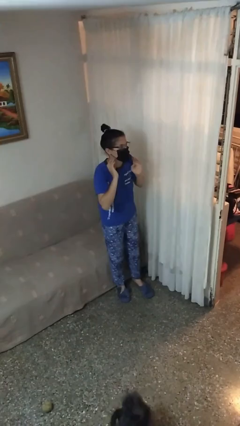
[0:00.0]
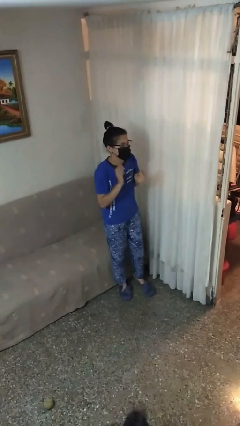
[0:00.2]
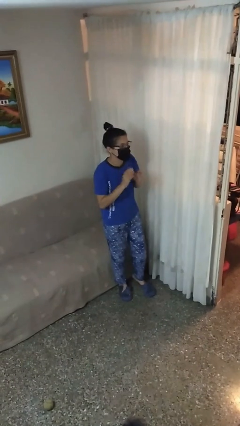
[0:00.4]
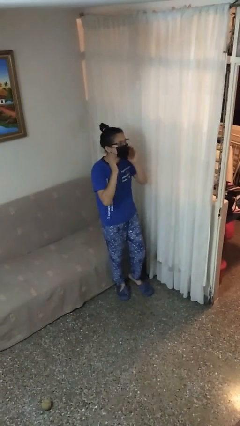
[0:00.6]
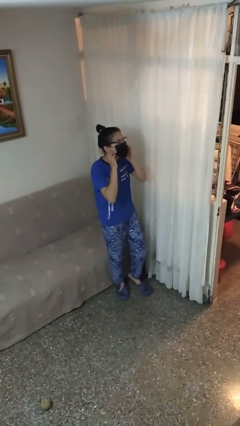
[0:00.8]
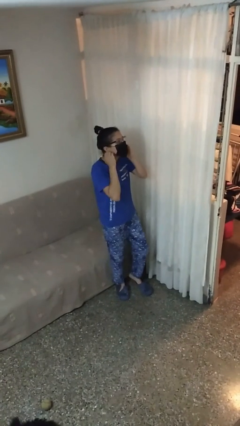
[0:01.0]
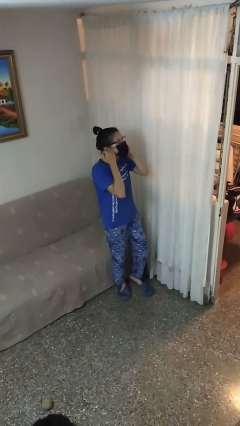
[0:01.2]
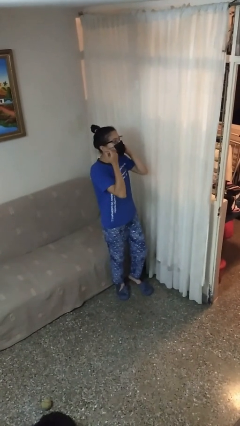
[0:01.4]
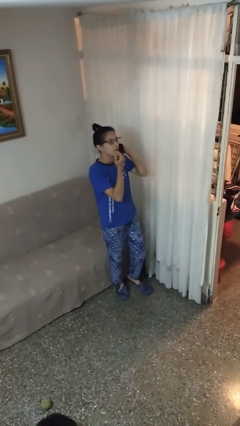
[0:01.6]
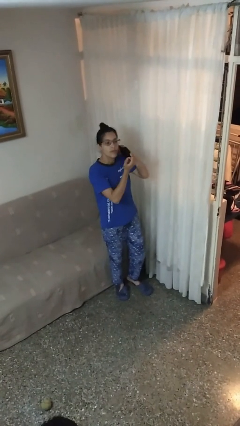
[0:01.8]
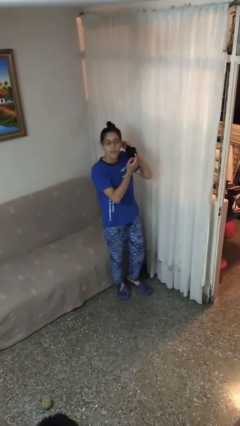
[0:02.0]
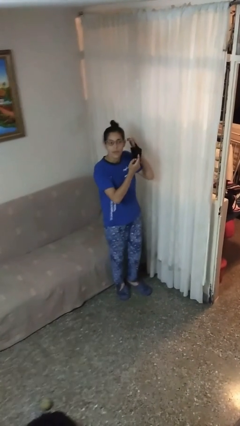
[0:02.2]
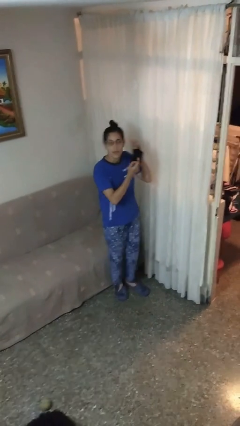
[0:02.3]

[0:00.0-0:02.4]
person takes off facemask

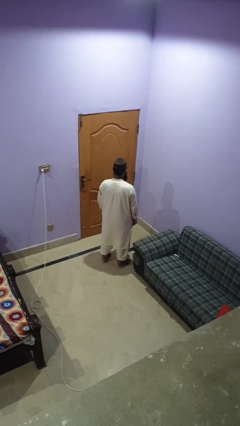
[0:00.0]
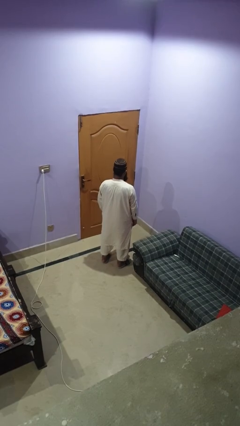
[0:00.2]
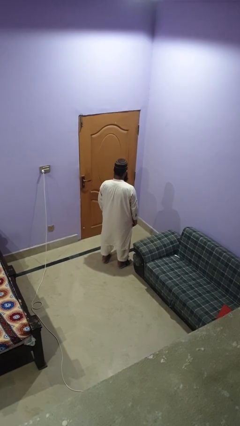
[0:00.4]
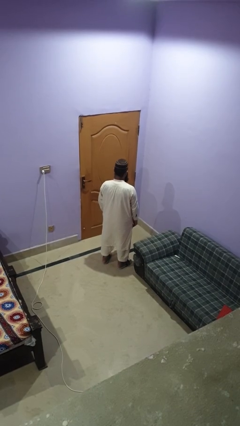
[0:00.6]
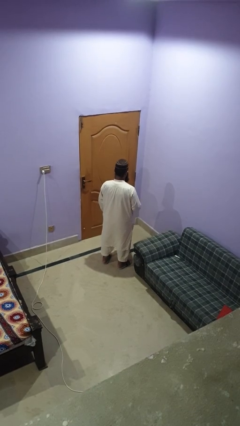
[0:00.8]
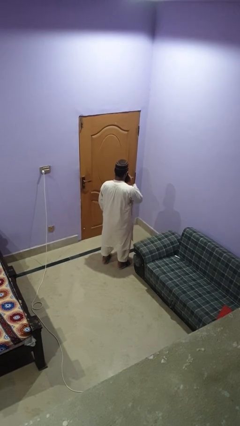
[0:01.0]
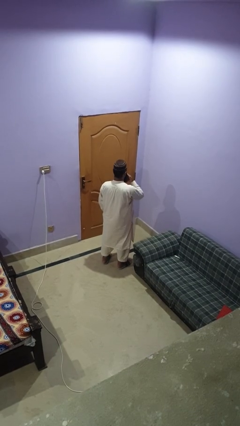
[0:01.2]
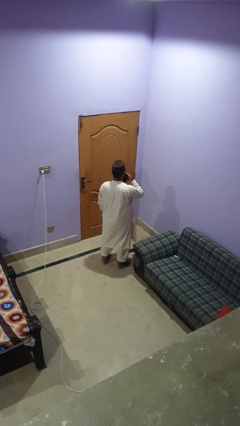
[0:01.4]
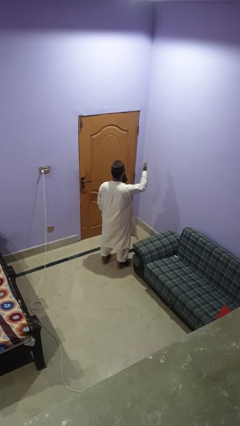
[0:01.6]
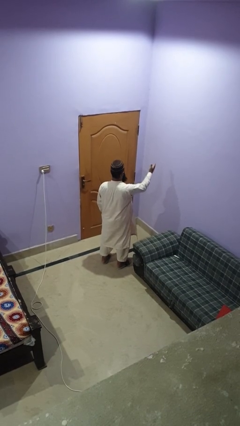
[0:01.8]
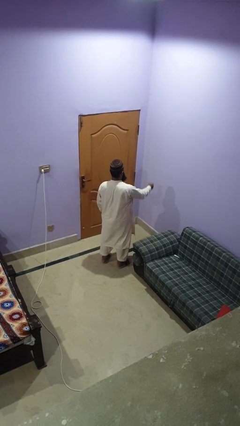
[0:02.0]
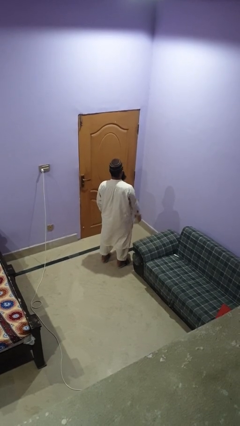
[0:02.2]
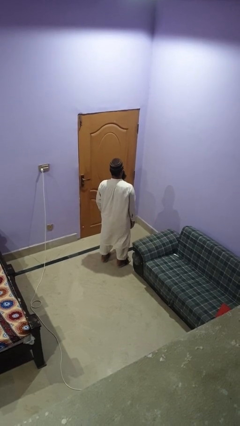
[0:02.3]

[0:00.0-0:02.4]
person gestures blow kiss

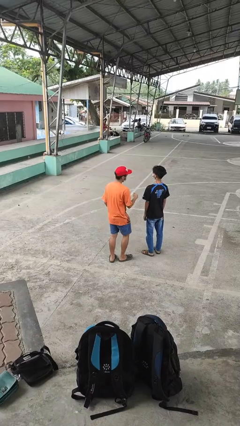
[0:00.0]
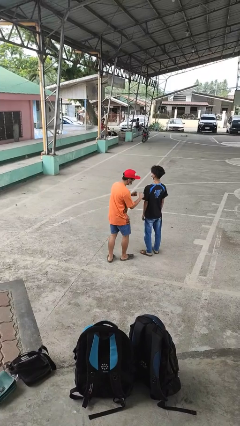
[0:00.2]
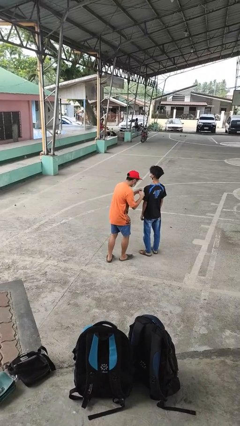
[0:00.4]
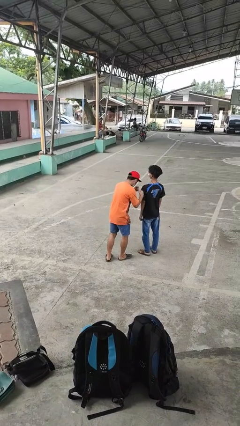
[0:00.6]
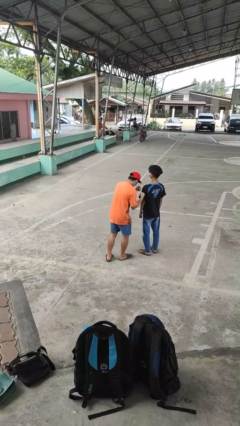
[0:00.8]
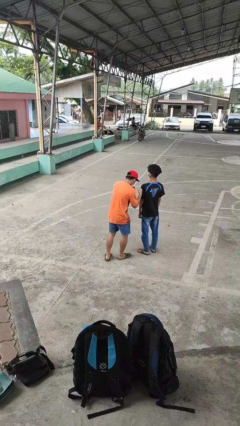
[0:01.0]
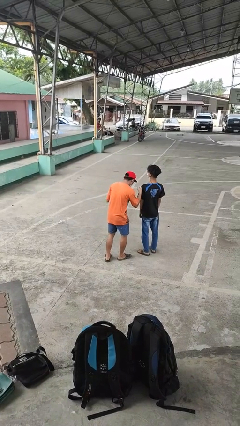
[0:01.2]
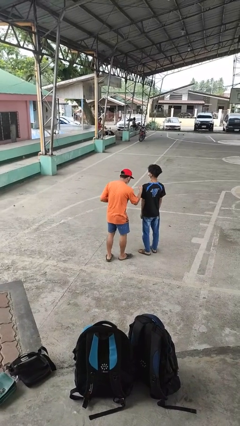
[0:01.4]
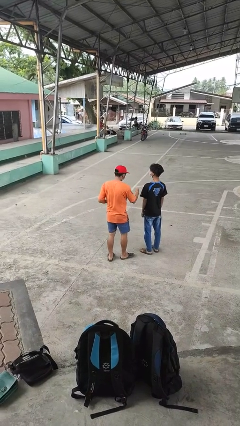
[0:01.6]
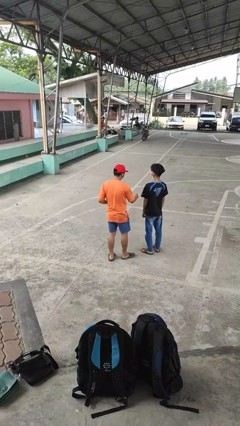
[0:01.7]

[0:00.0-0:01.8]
person pounds shoulders of person

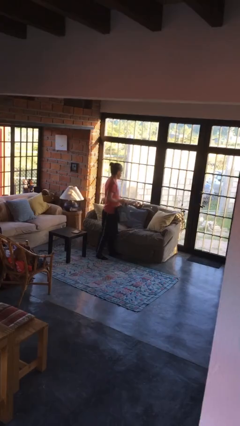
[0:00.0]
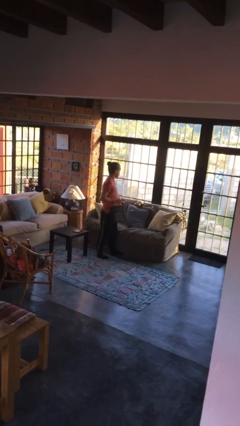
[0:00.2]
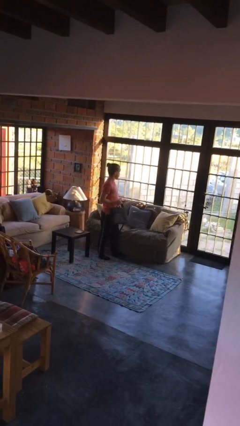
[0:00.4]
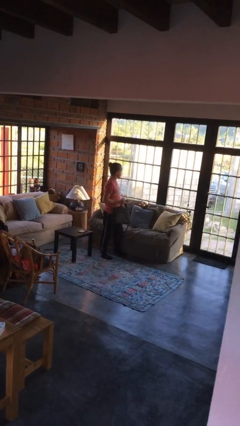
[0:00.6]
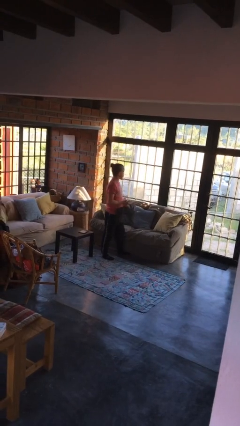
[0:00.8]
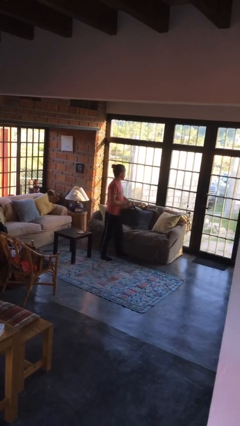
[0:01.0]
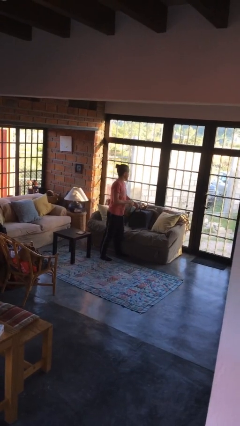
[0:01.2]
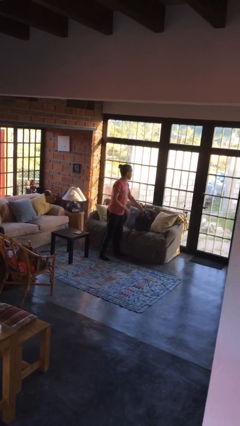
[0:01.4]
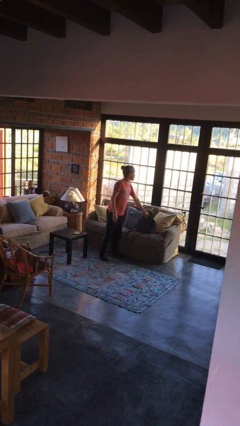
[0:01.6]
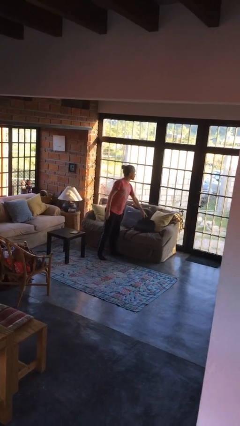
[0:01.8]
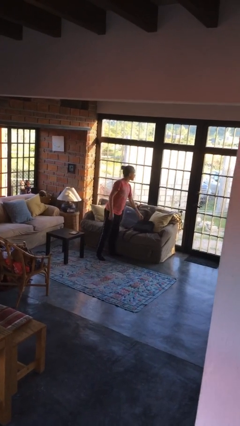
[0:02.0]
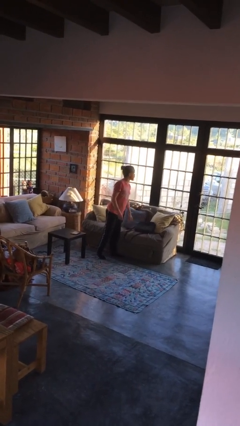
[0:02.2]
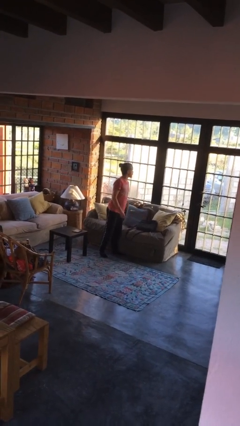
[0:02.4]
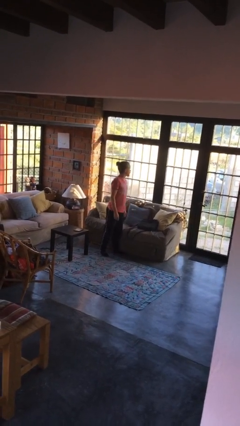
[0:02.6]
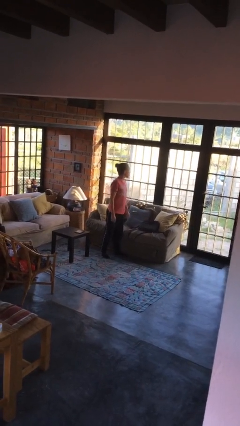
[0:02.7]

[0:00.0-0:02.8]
person puts down object on couch

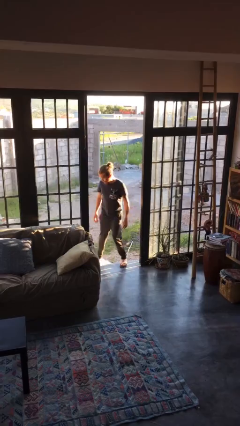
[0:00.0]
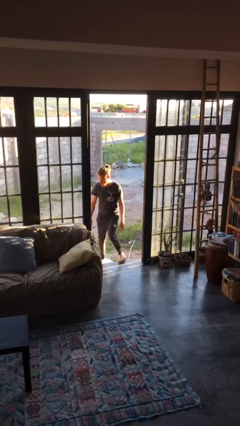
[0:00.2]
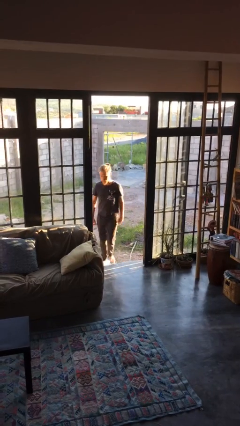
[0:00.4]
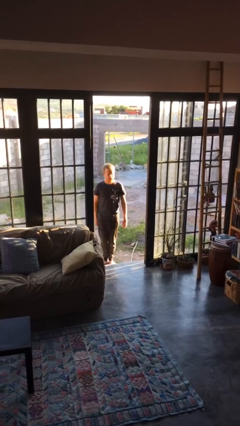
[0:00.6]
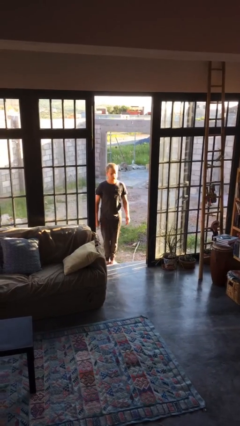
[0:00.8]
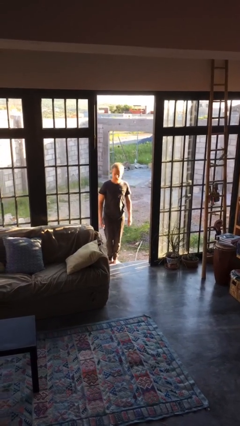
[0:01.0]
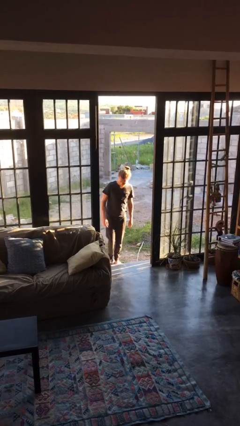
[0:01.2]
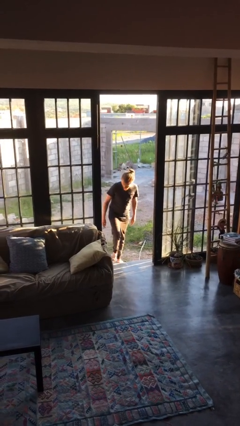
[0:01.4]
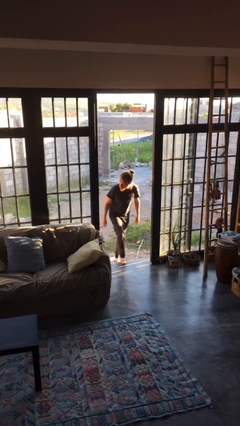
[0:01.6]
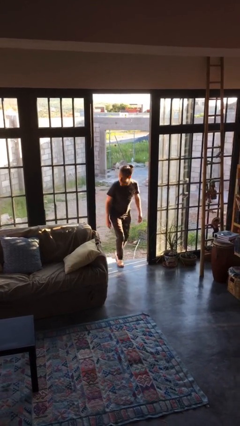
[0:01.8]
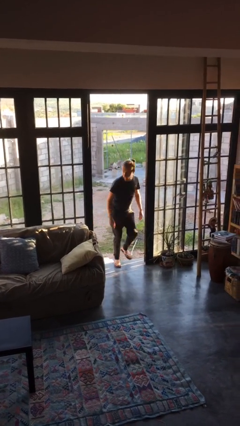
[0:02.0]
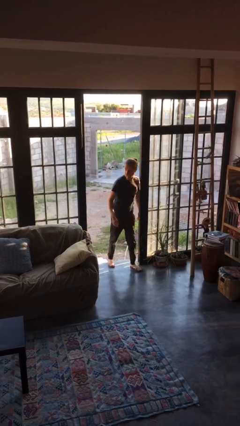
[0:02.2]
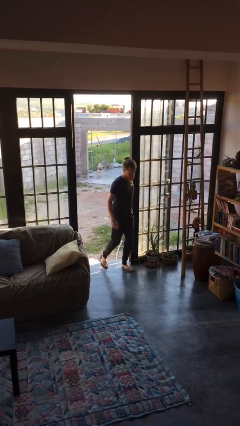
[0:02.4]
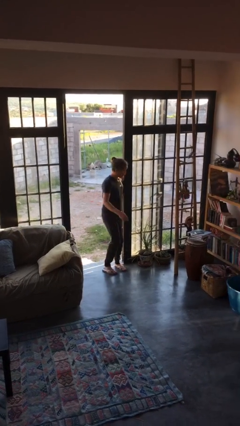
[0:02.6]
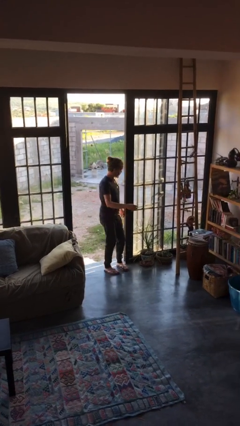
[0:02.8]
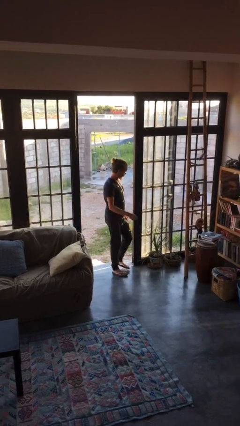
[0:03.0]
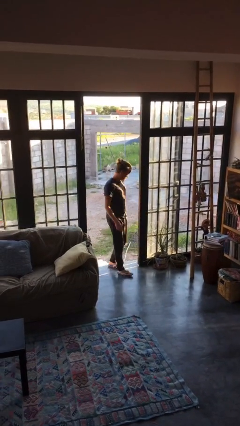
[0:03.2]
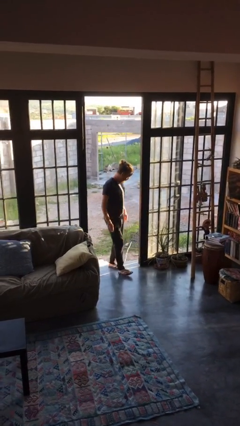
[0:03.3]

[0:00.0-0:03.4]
person bumps into wall

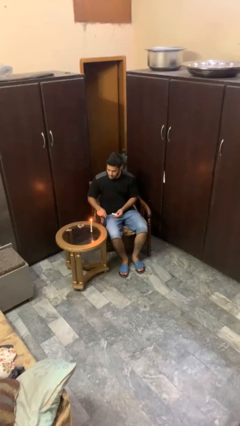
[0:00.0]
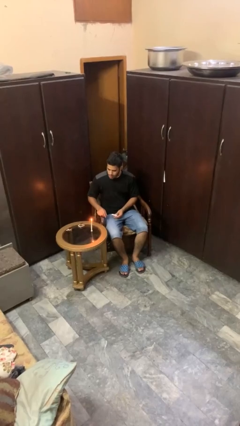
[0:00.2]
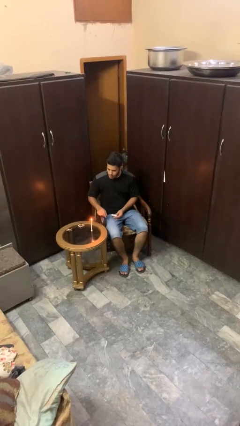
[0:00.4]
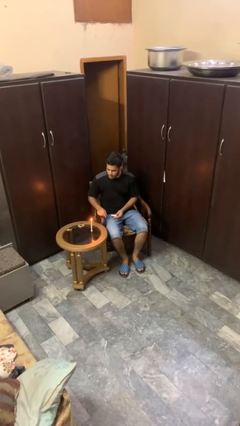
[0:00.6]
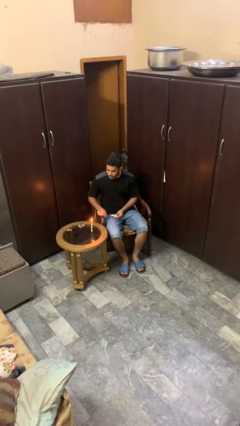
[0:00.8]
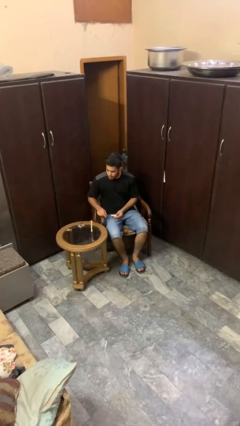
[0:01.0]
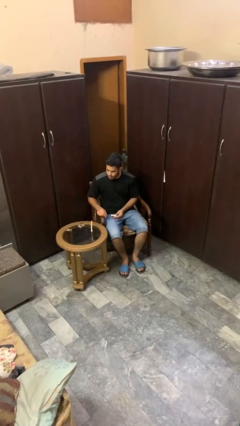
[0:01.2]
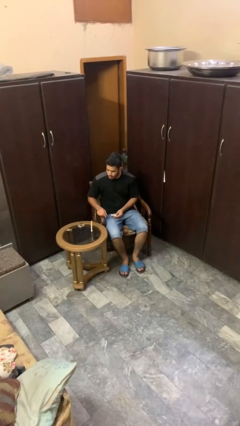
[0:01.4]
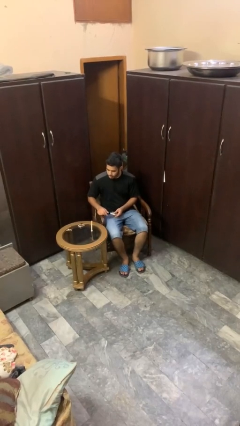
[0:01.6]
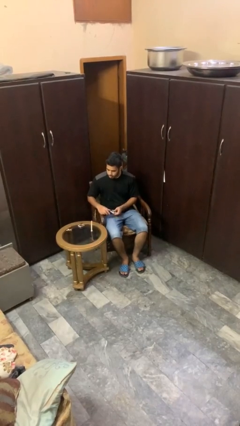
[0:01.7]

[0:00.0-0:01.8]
person extinguishes candle

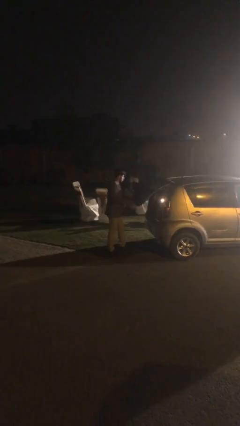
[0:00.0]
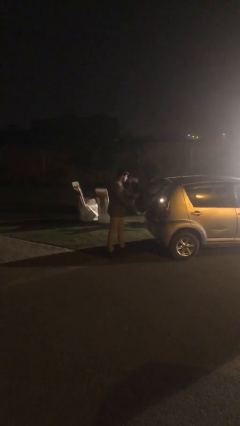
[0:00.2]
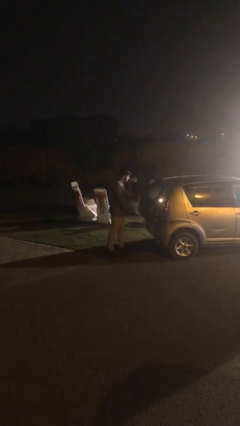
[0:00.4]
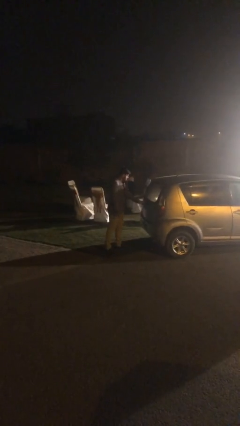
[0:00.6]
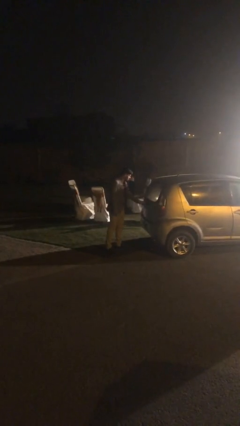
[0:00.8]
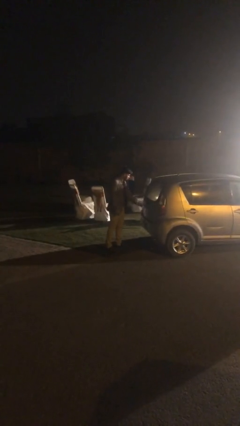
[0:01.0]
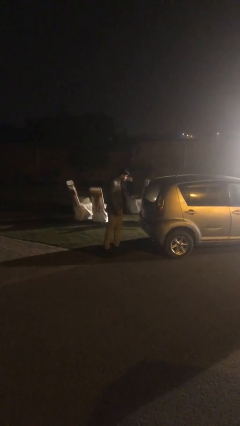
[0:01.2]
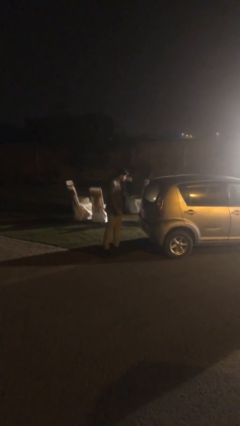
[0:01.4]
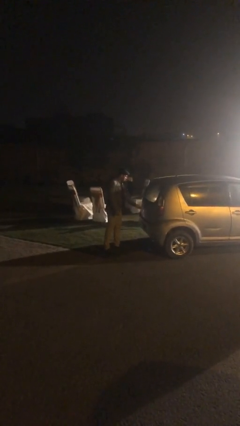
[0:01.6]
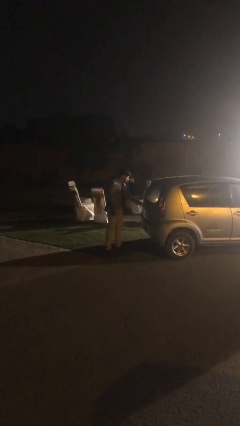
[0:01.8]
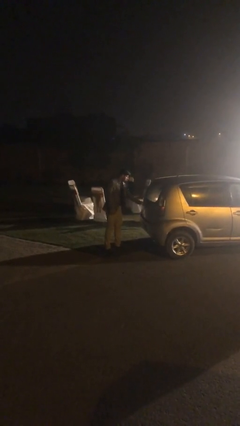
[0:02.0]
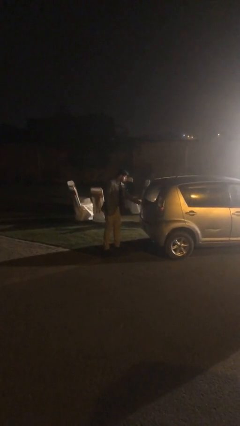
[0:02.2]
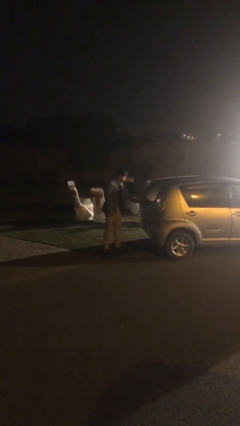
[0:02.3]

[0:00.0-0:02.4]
person closes car trunk
